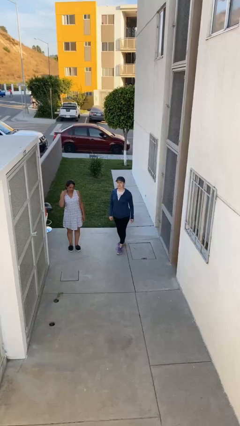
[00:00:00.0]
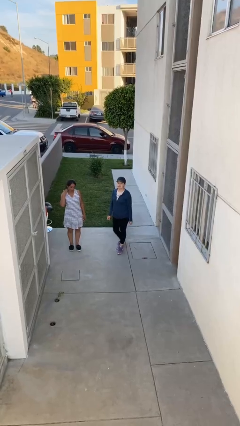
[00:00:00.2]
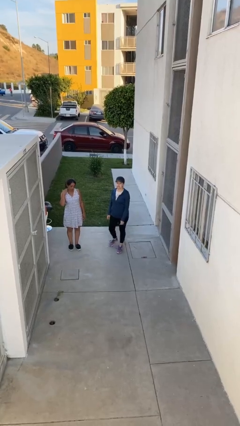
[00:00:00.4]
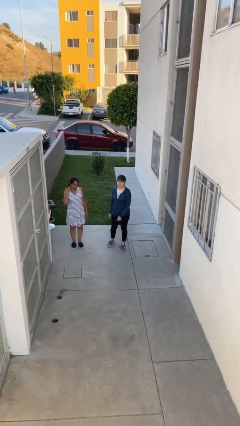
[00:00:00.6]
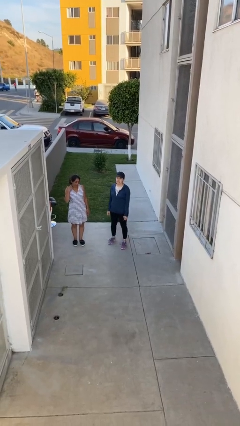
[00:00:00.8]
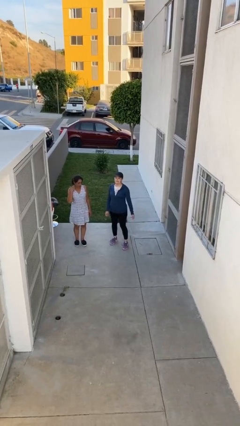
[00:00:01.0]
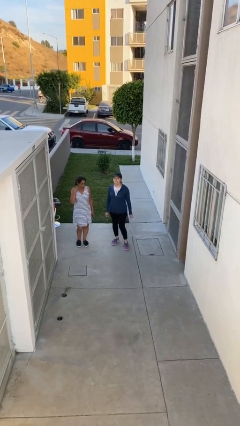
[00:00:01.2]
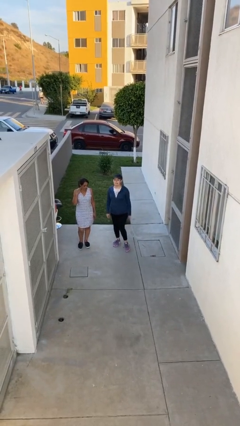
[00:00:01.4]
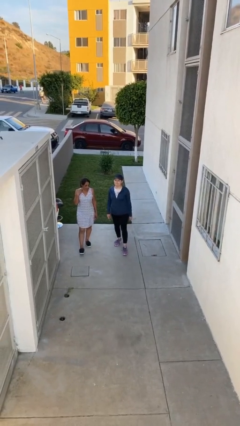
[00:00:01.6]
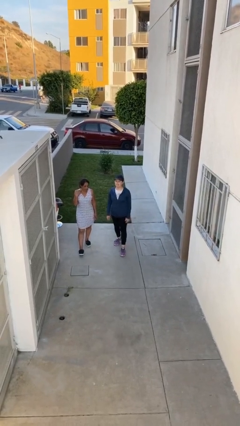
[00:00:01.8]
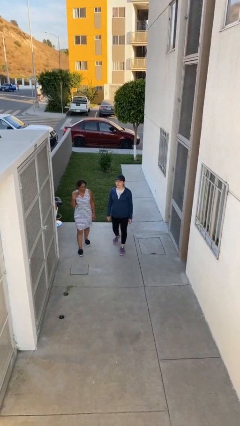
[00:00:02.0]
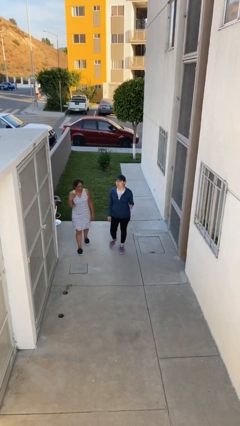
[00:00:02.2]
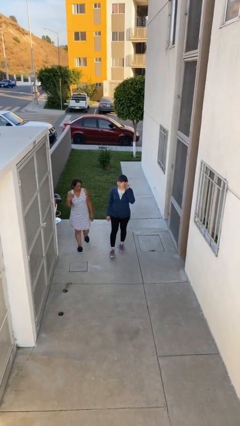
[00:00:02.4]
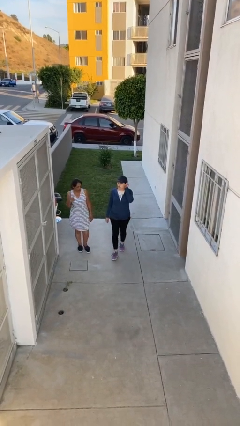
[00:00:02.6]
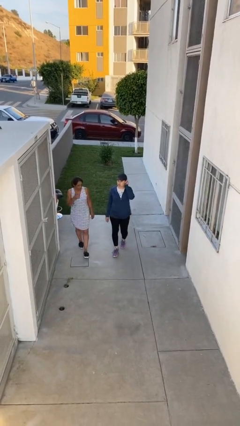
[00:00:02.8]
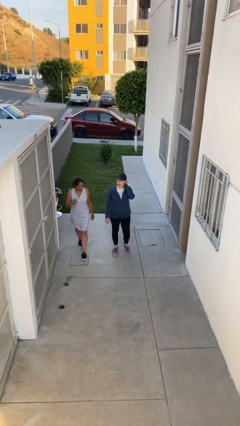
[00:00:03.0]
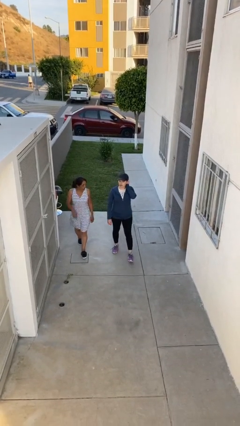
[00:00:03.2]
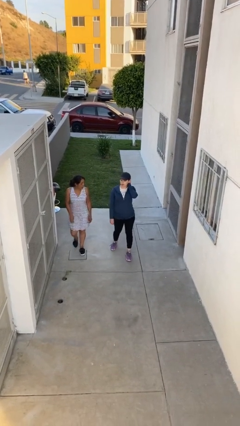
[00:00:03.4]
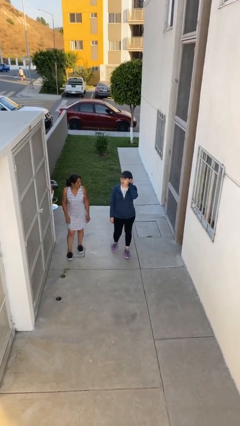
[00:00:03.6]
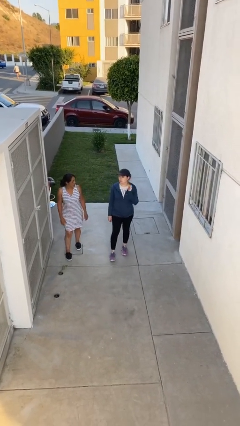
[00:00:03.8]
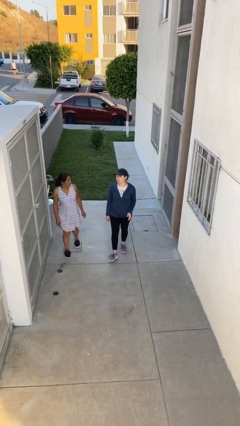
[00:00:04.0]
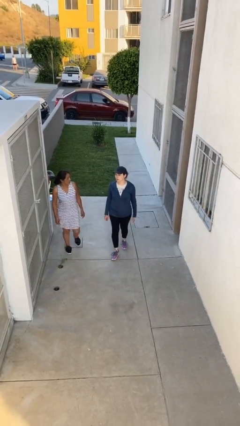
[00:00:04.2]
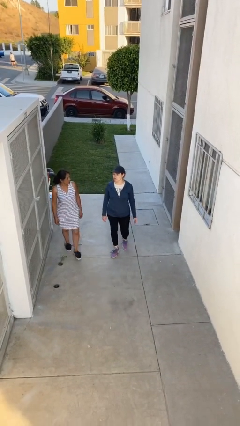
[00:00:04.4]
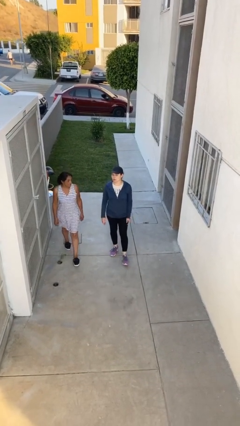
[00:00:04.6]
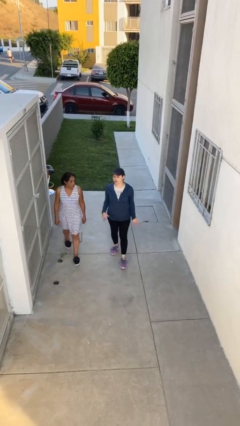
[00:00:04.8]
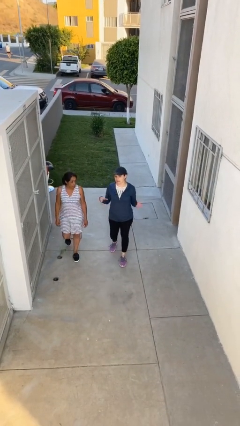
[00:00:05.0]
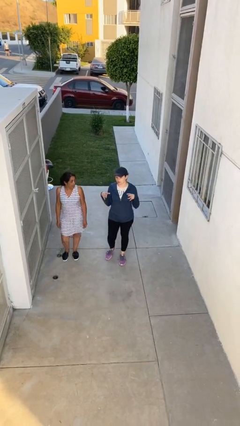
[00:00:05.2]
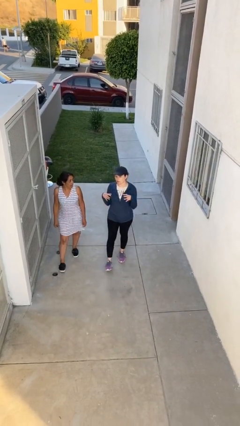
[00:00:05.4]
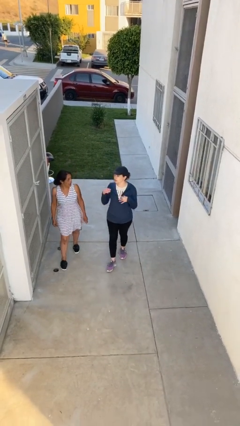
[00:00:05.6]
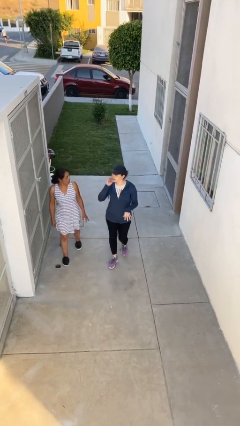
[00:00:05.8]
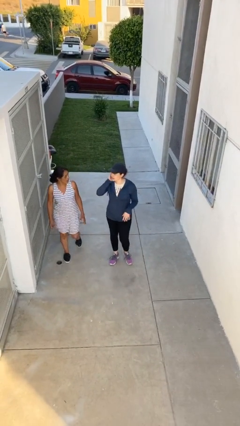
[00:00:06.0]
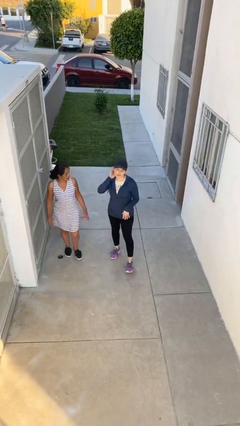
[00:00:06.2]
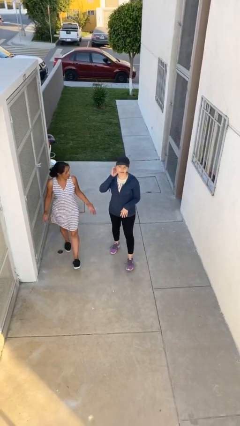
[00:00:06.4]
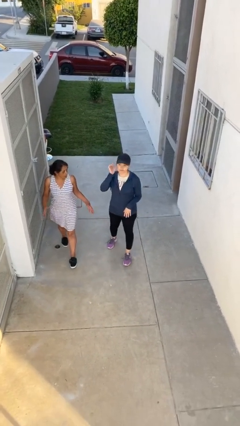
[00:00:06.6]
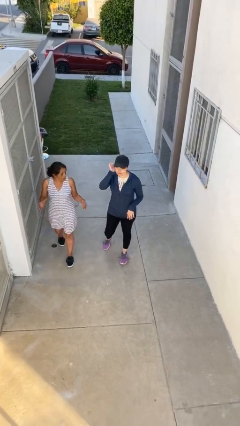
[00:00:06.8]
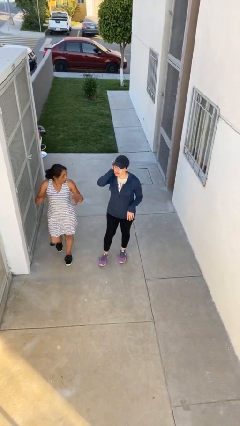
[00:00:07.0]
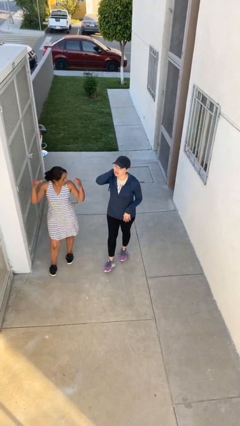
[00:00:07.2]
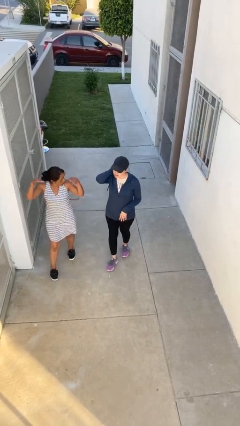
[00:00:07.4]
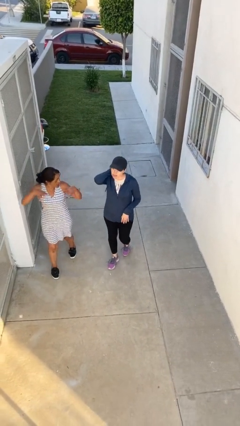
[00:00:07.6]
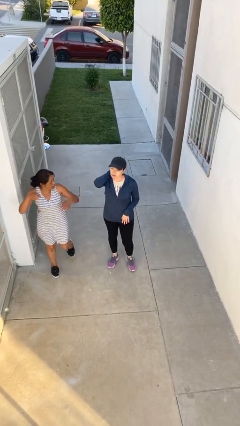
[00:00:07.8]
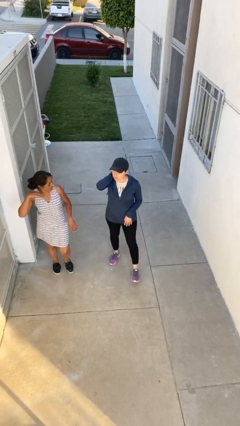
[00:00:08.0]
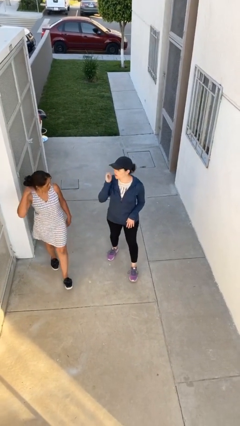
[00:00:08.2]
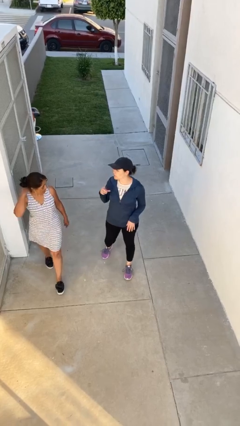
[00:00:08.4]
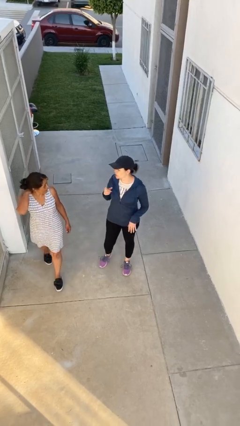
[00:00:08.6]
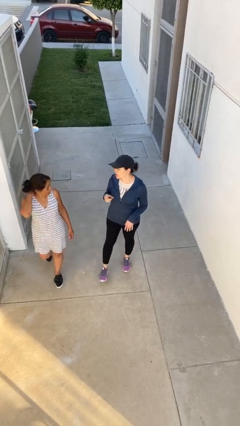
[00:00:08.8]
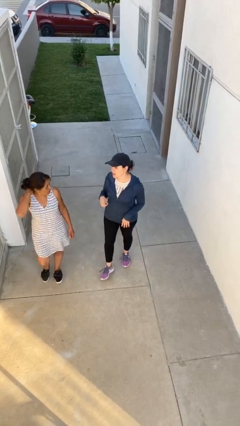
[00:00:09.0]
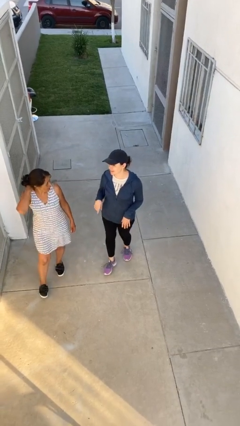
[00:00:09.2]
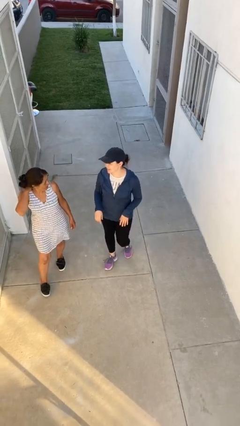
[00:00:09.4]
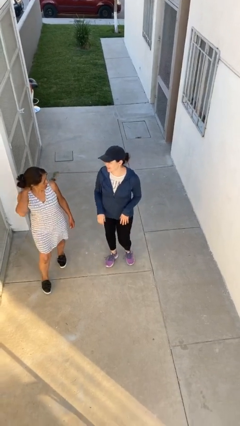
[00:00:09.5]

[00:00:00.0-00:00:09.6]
person talks to person

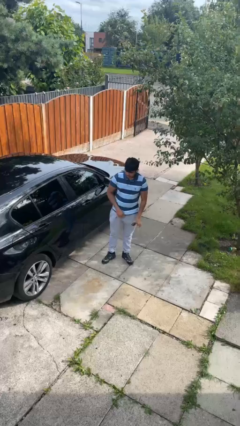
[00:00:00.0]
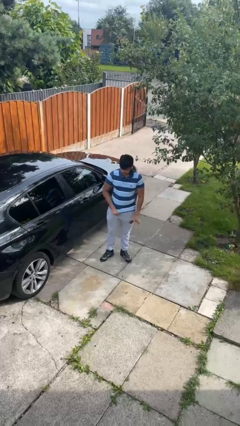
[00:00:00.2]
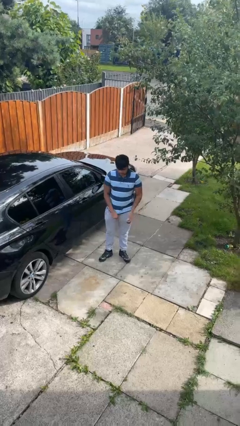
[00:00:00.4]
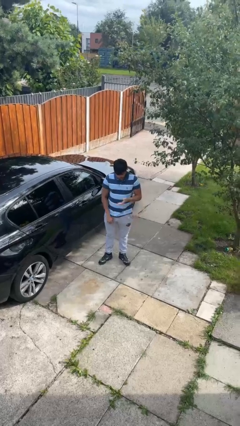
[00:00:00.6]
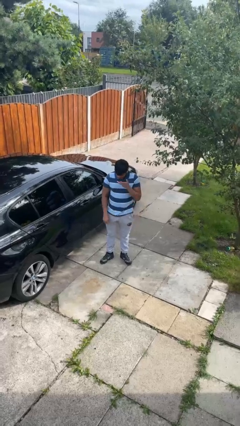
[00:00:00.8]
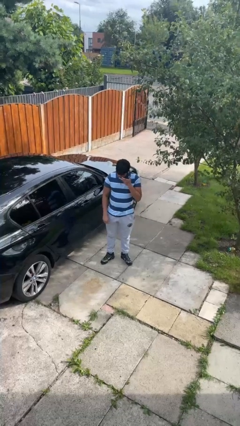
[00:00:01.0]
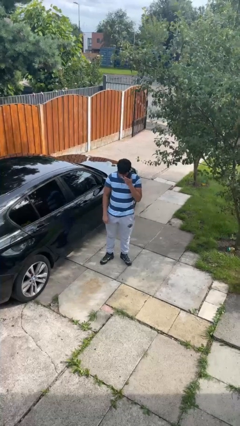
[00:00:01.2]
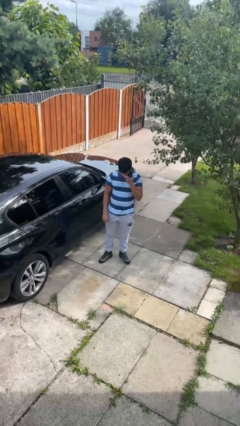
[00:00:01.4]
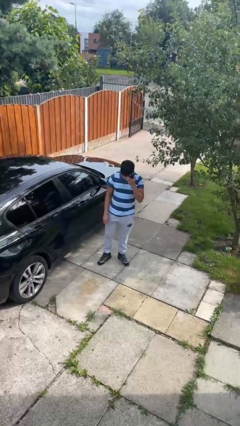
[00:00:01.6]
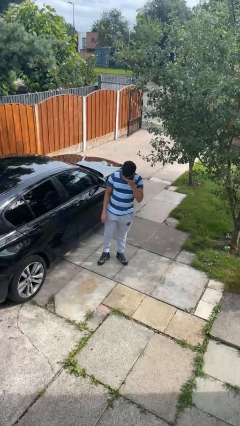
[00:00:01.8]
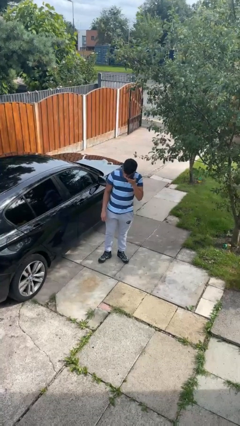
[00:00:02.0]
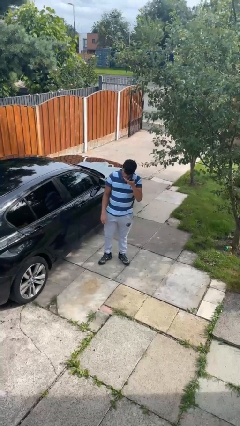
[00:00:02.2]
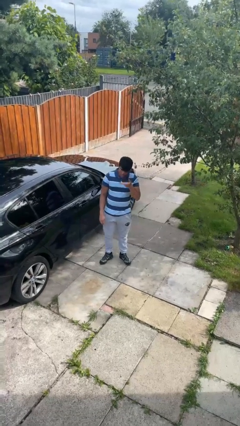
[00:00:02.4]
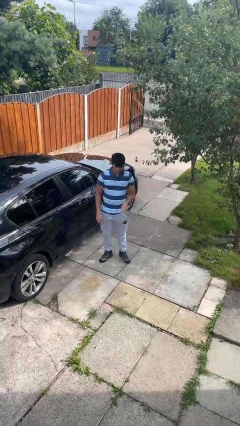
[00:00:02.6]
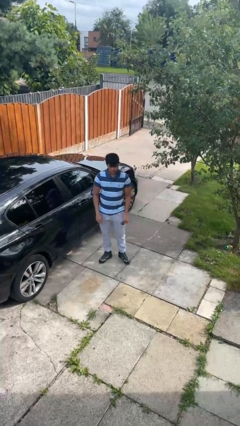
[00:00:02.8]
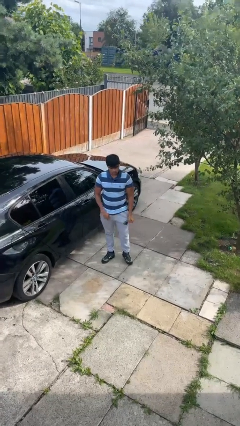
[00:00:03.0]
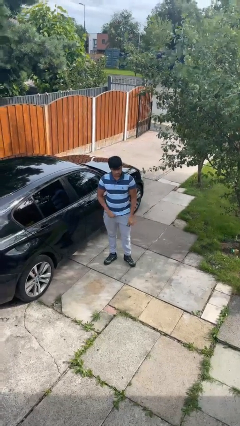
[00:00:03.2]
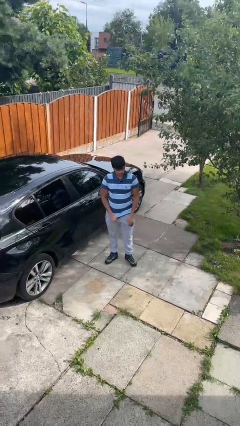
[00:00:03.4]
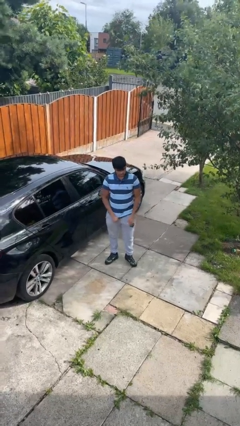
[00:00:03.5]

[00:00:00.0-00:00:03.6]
person licks fingers

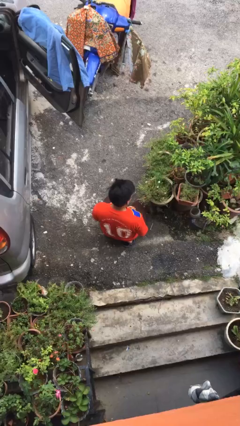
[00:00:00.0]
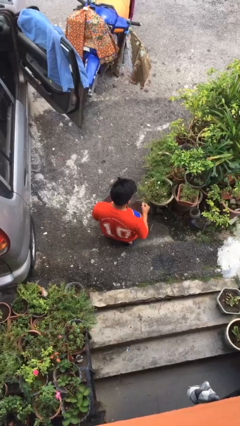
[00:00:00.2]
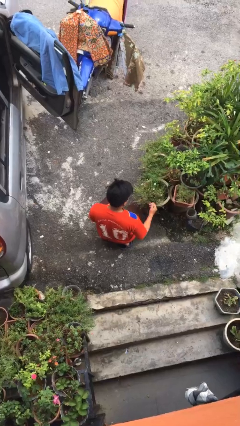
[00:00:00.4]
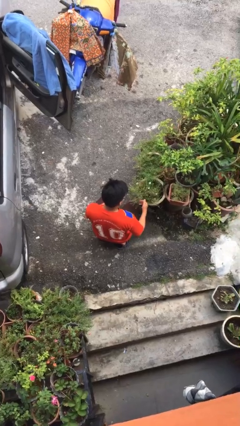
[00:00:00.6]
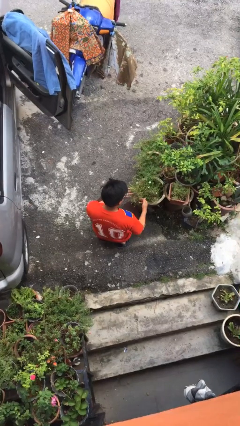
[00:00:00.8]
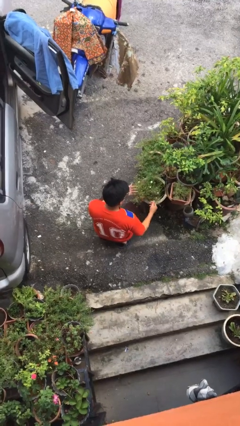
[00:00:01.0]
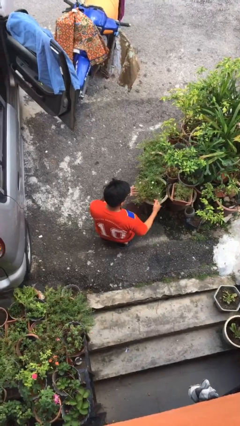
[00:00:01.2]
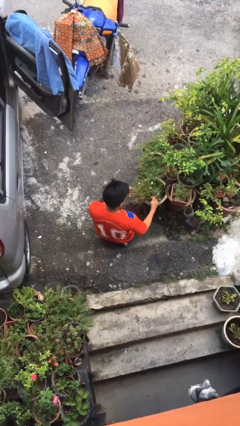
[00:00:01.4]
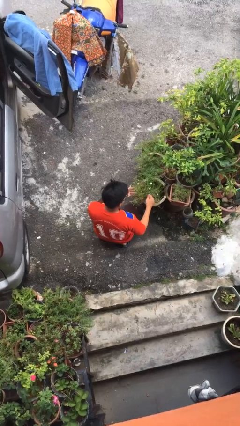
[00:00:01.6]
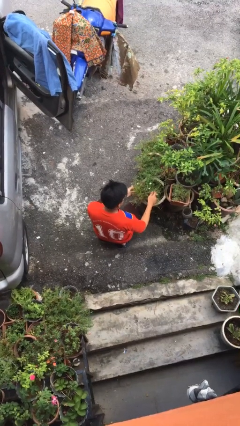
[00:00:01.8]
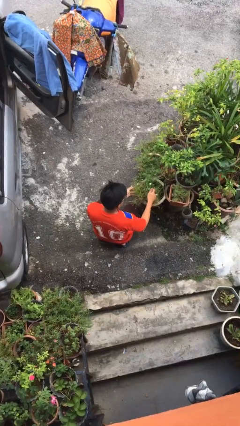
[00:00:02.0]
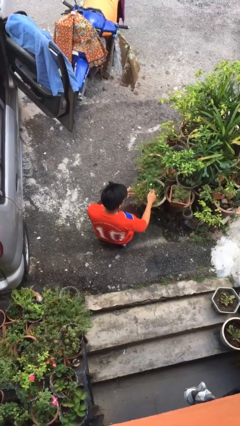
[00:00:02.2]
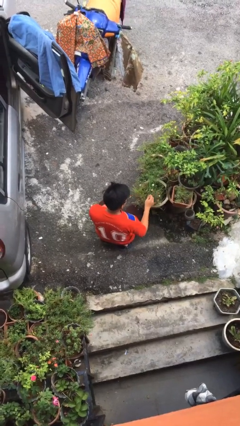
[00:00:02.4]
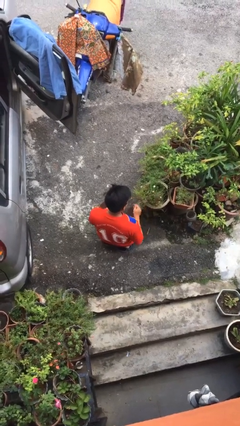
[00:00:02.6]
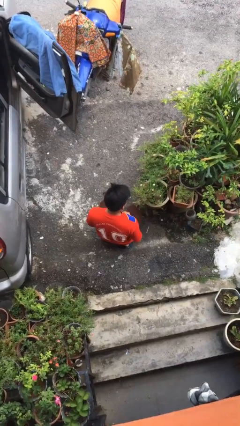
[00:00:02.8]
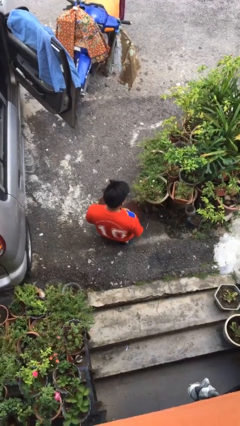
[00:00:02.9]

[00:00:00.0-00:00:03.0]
person arranges flowers in vase

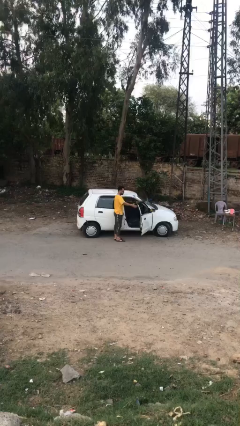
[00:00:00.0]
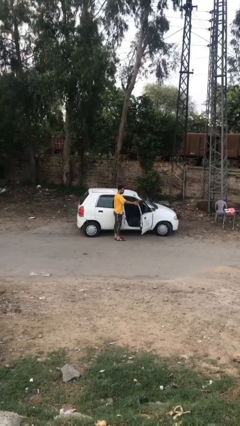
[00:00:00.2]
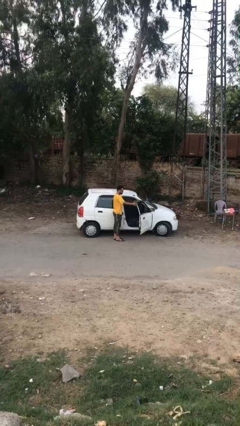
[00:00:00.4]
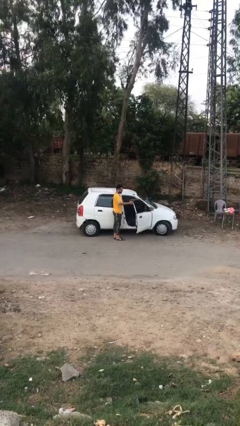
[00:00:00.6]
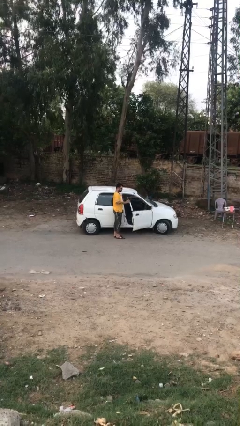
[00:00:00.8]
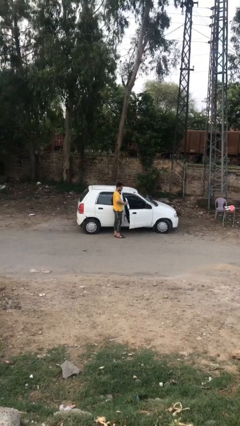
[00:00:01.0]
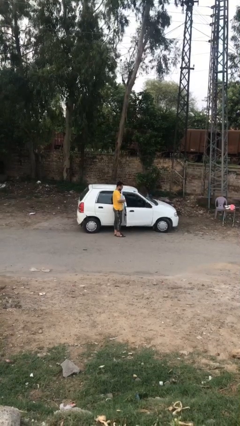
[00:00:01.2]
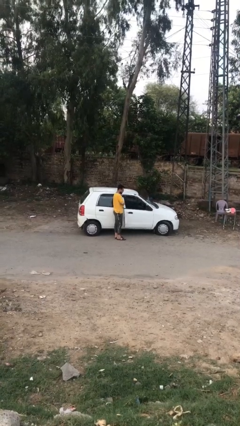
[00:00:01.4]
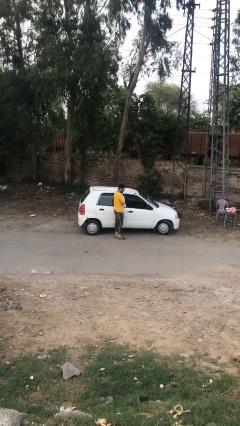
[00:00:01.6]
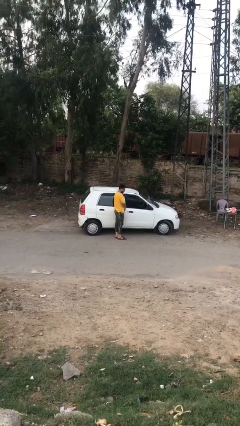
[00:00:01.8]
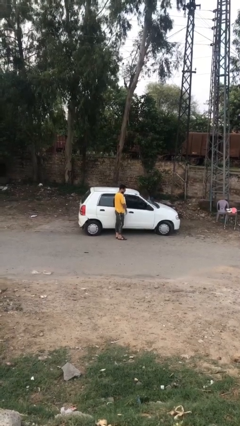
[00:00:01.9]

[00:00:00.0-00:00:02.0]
person closes car door
